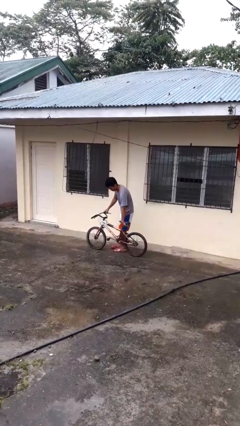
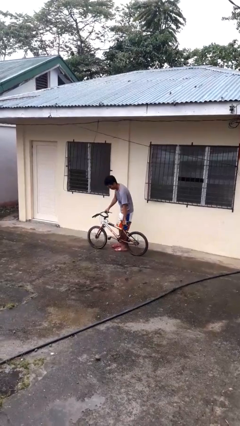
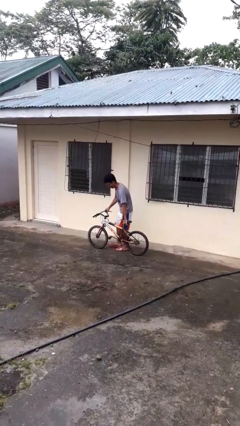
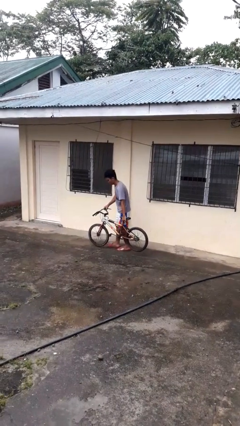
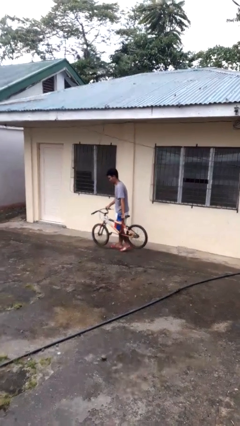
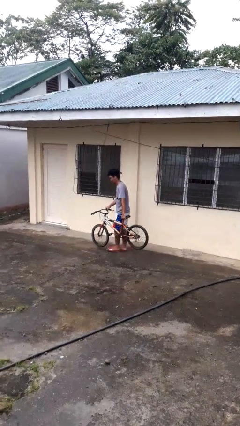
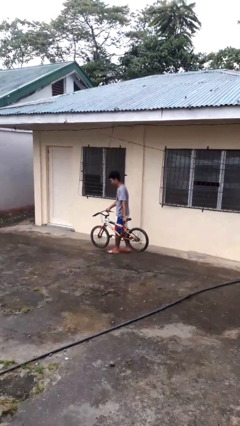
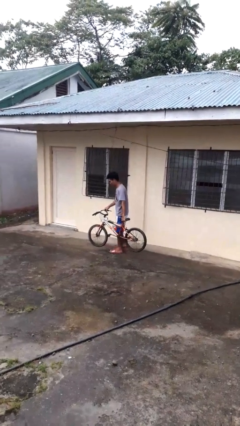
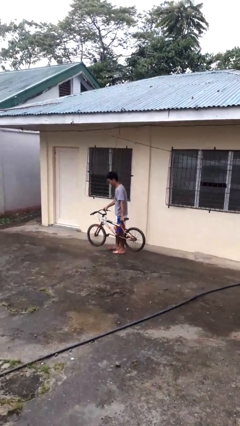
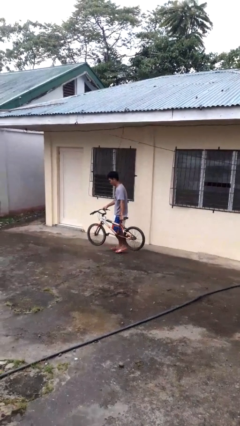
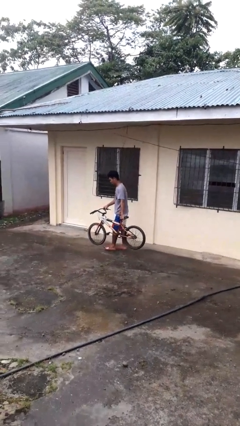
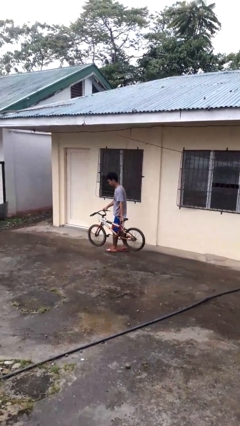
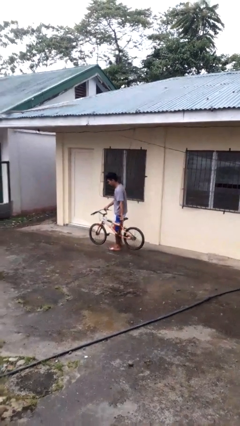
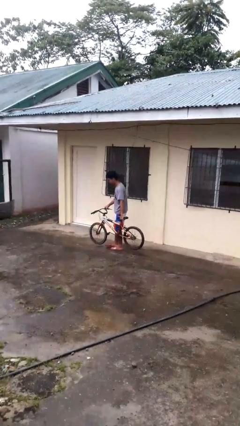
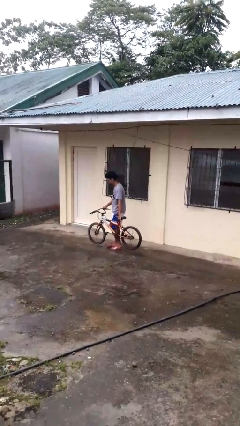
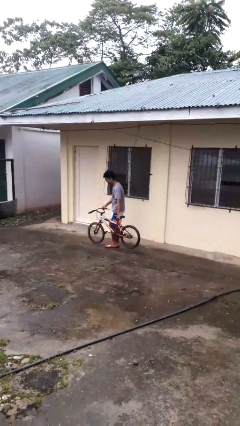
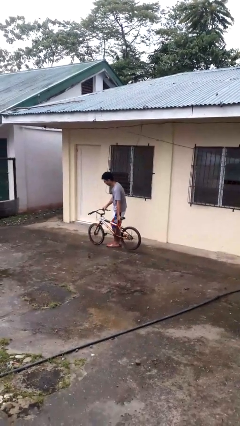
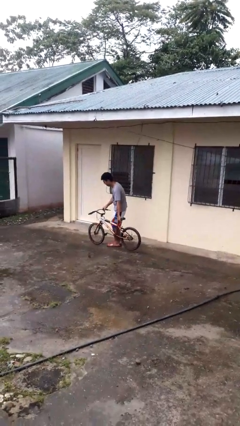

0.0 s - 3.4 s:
person carries bicycle

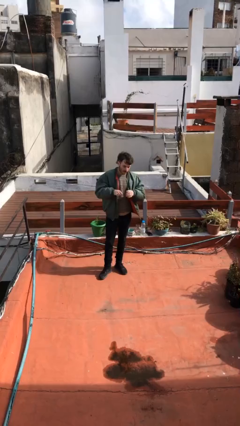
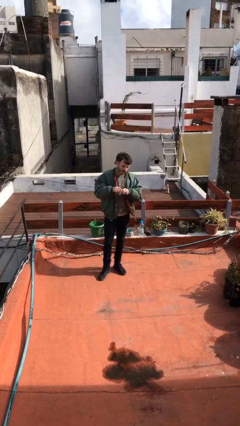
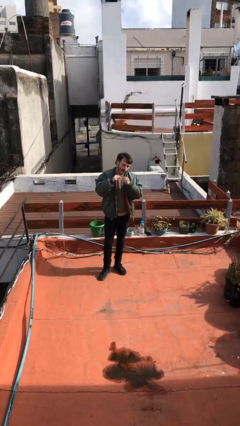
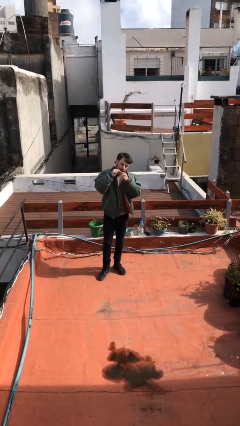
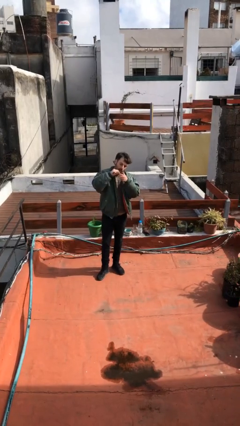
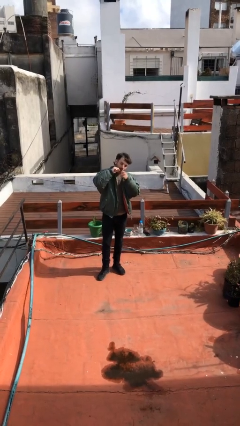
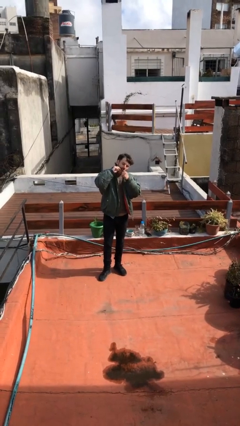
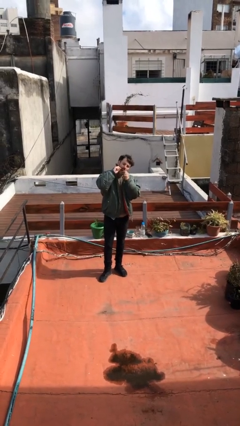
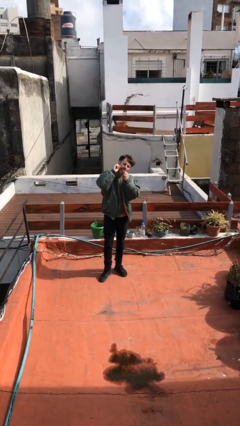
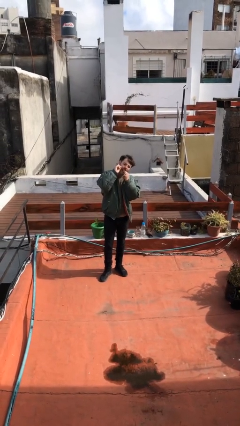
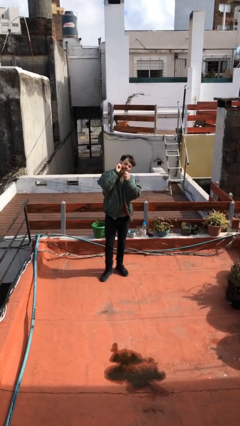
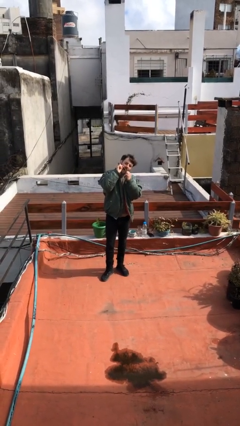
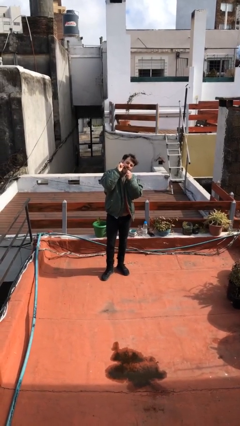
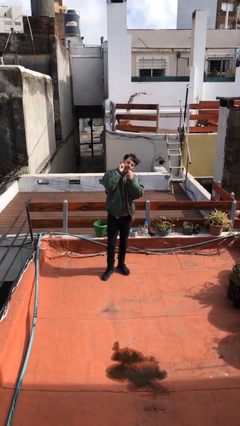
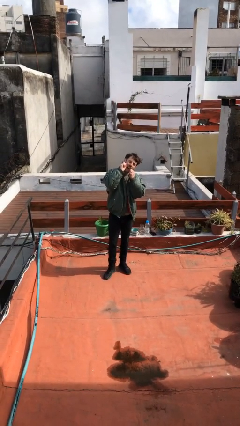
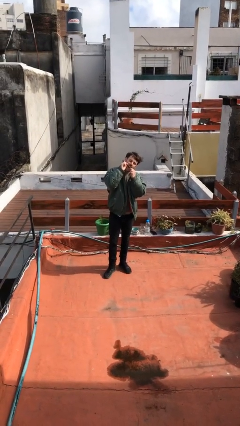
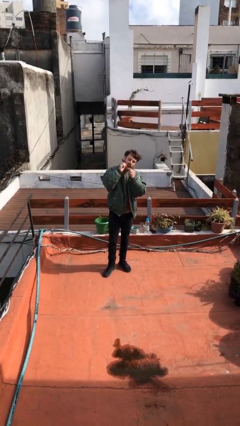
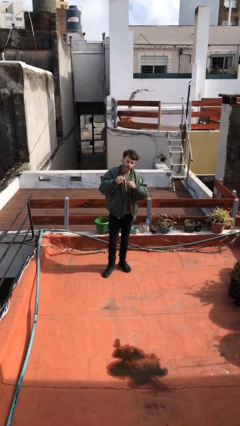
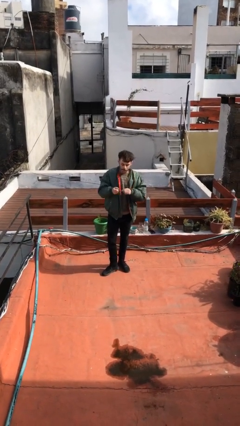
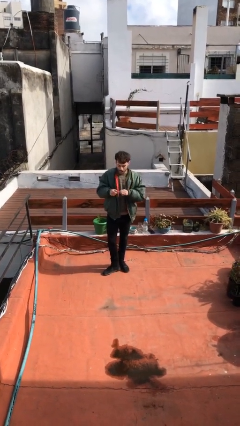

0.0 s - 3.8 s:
person flosses

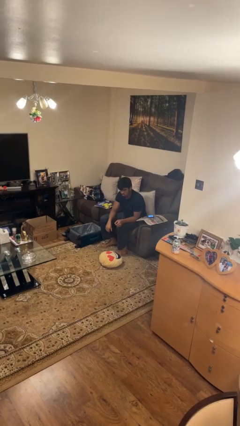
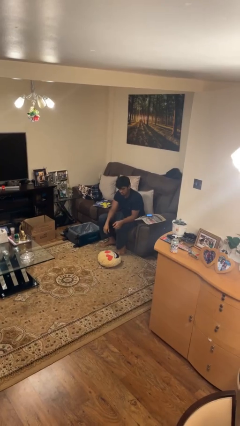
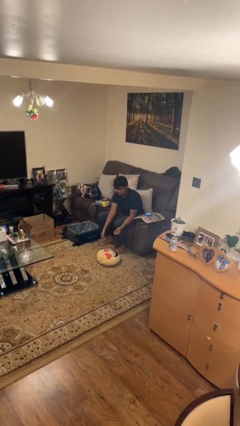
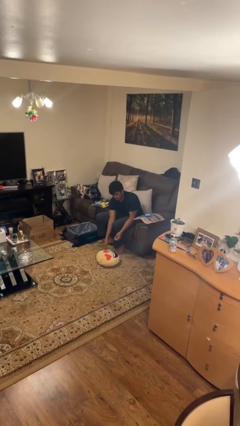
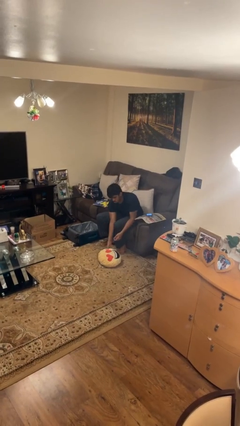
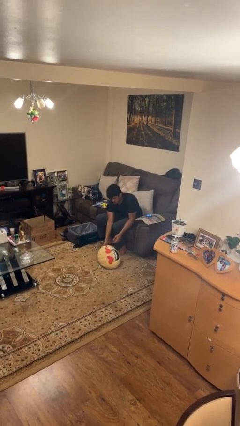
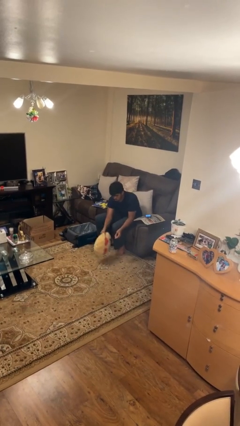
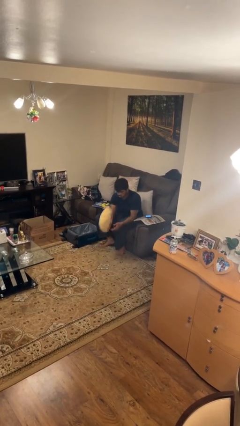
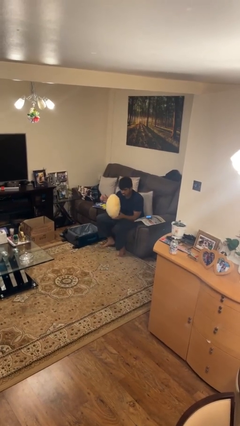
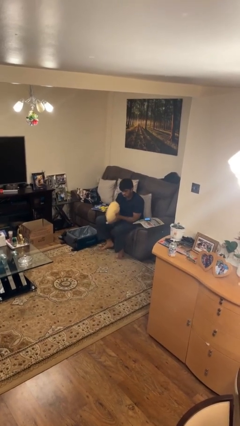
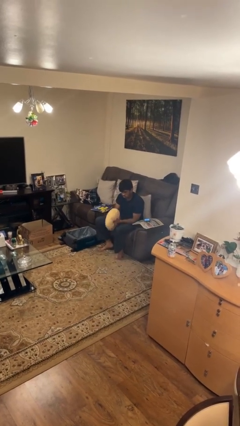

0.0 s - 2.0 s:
person picks up object from floor

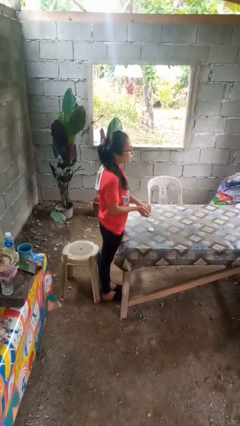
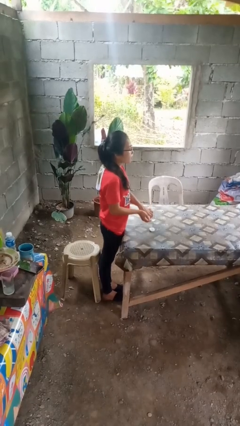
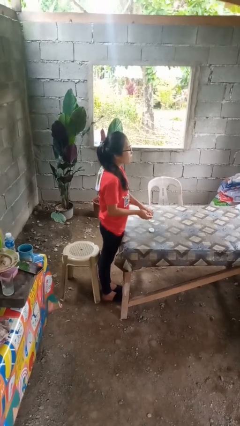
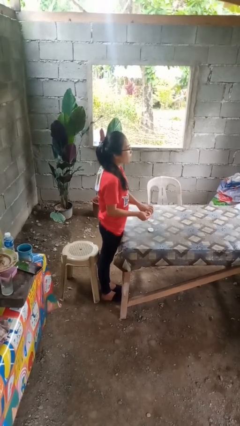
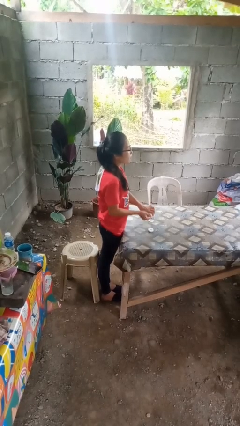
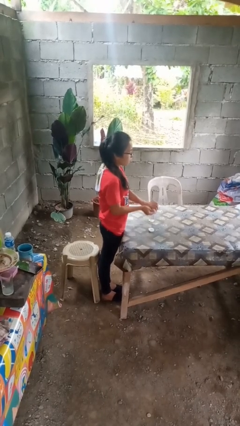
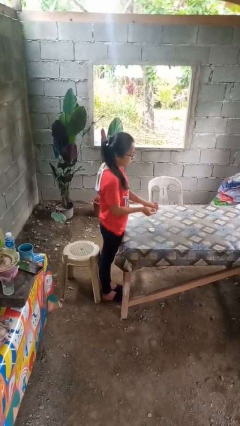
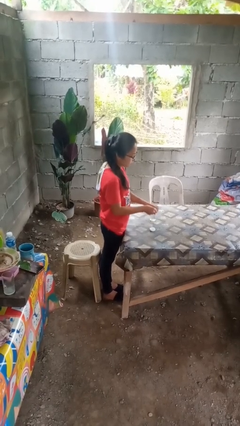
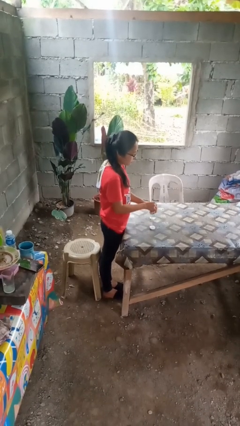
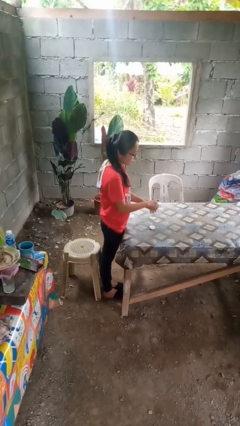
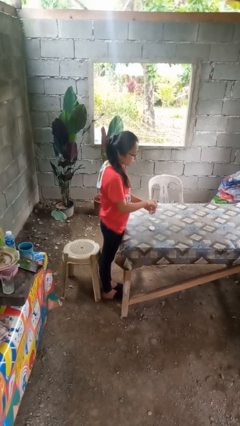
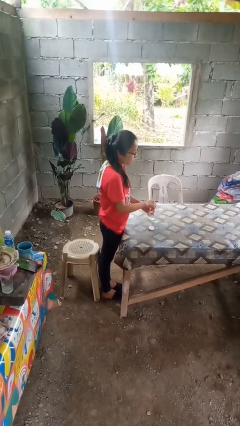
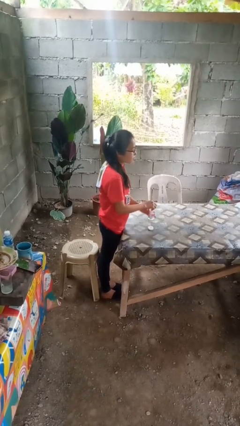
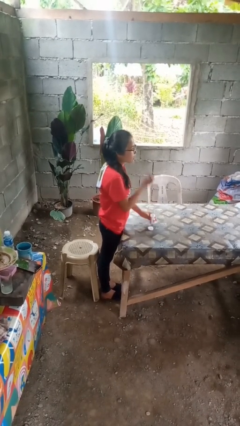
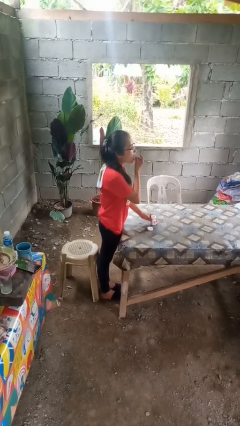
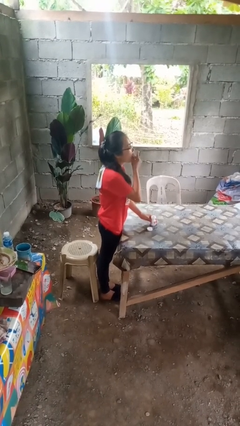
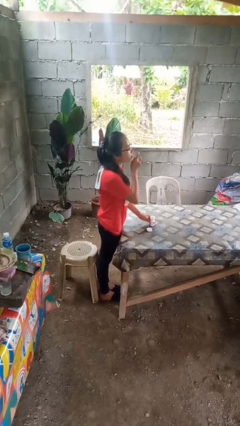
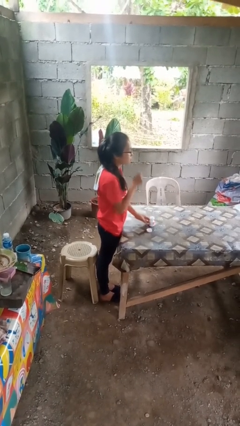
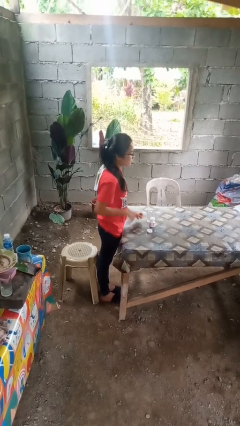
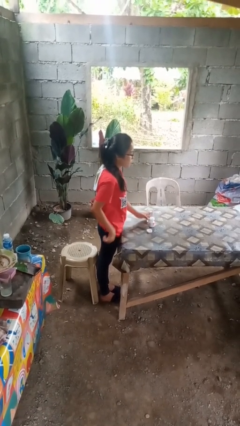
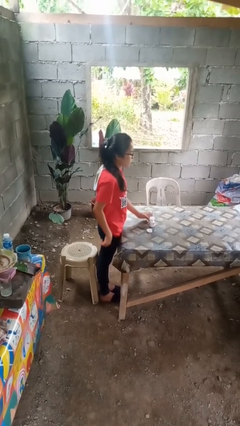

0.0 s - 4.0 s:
person takes medicine pills

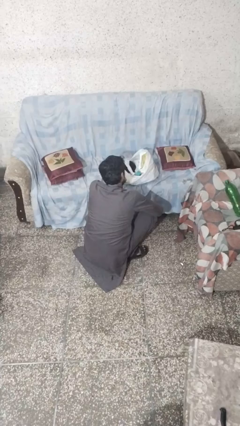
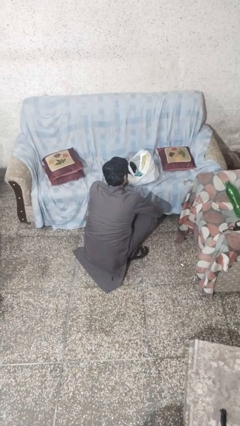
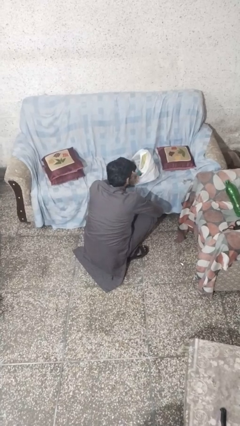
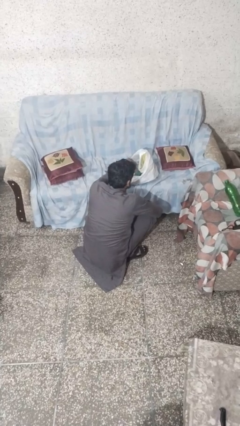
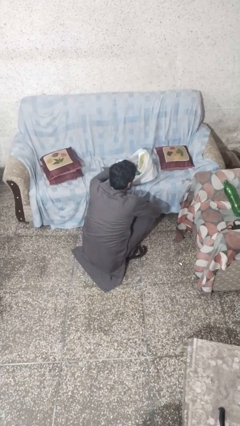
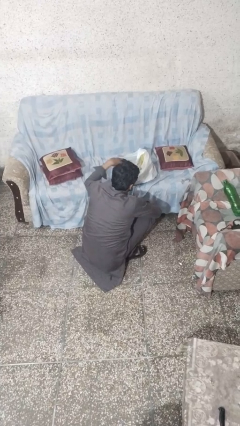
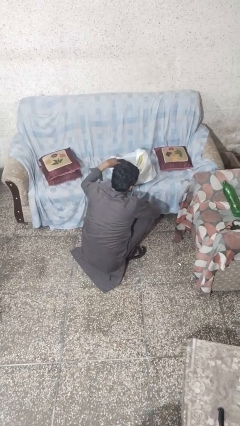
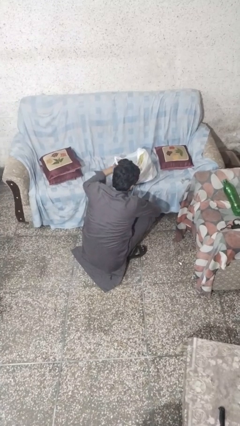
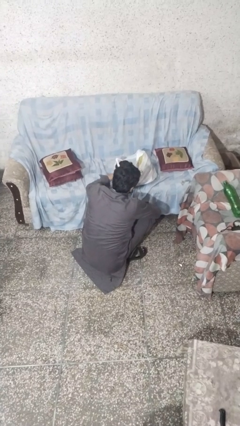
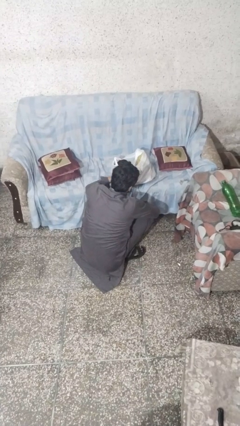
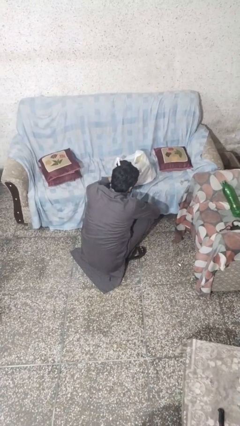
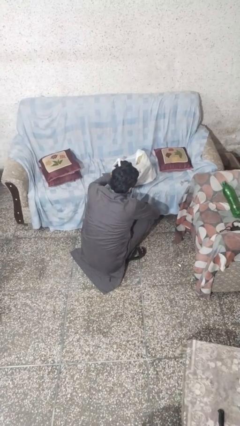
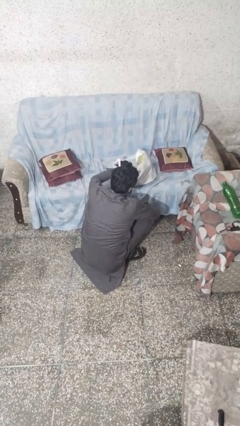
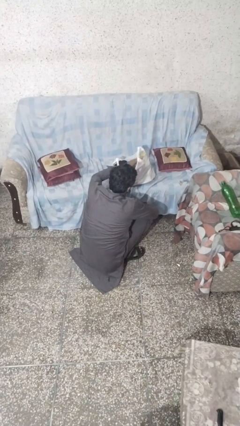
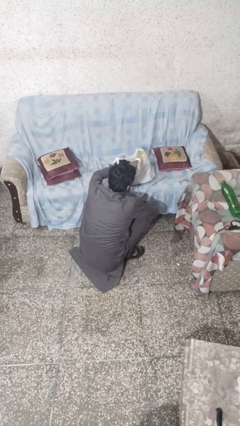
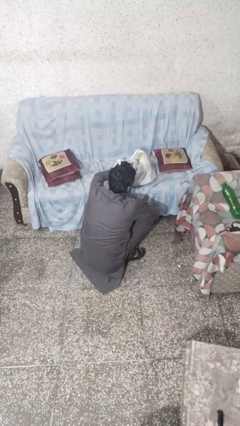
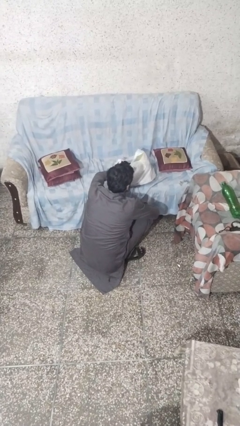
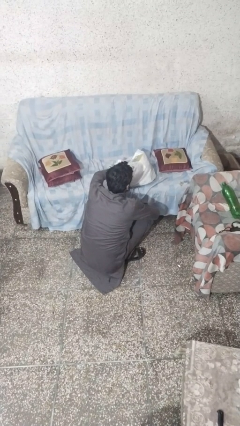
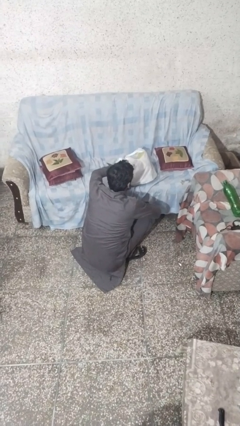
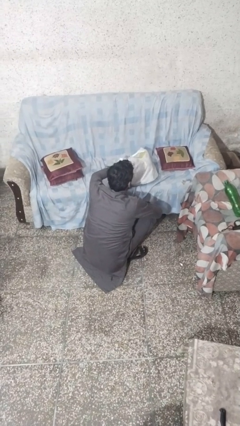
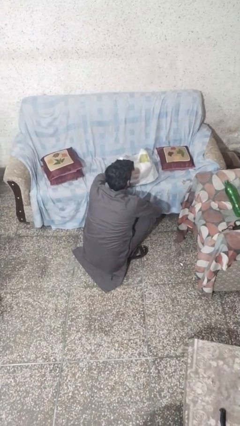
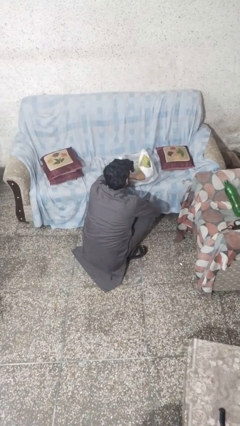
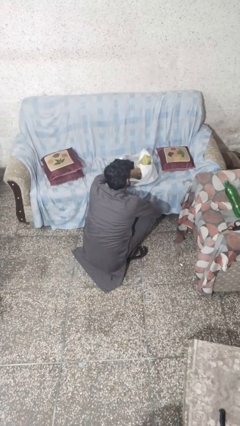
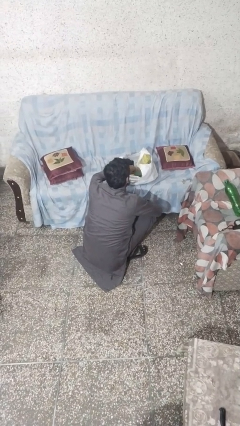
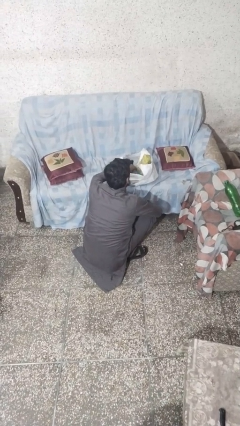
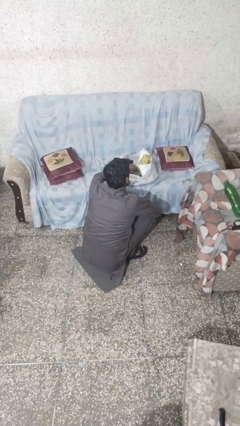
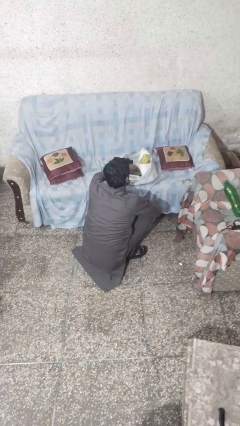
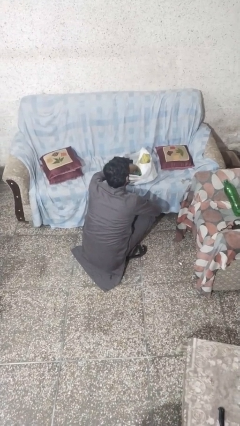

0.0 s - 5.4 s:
person searches in bag
